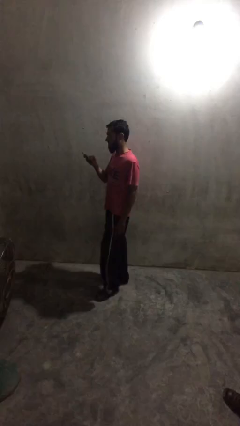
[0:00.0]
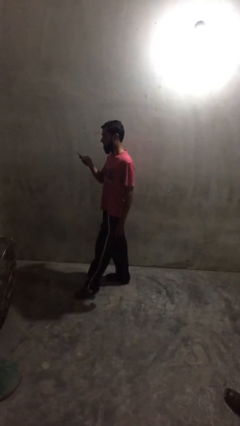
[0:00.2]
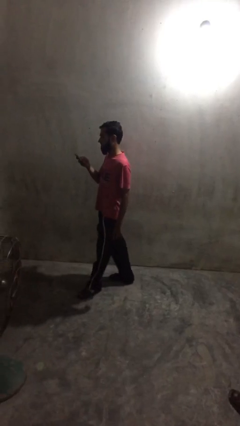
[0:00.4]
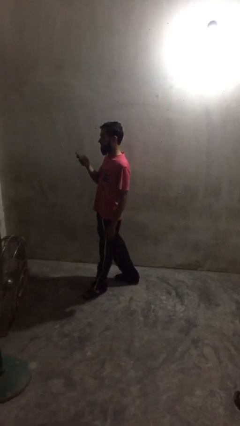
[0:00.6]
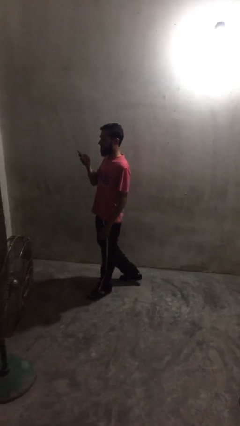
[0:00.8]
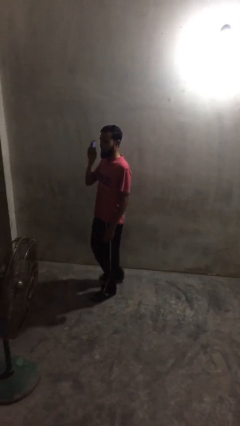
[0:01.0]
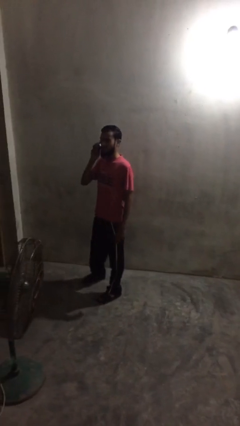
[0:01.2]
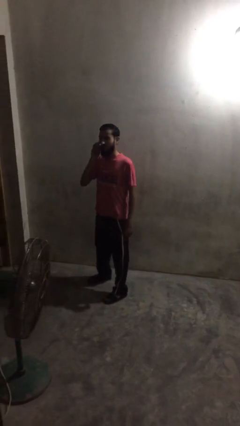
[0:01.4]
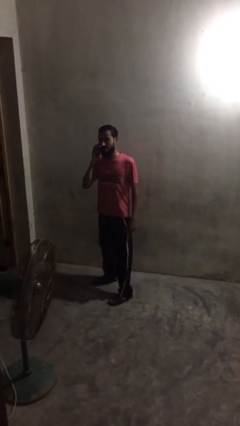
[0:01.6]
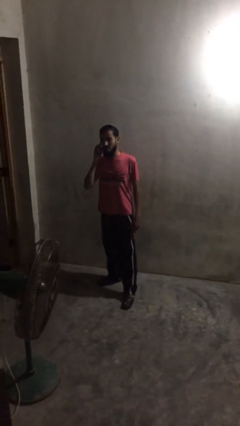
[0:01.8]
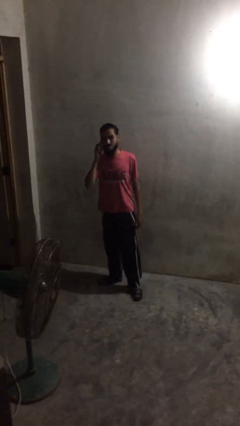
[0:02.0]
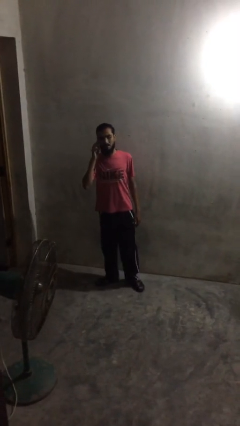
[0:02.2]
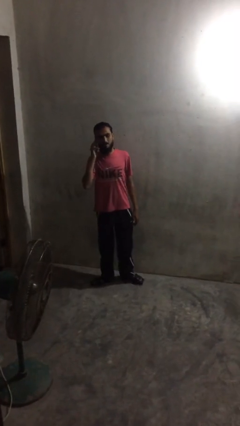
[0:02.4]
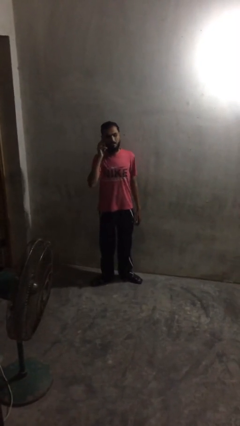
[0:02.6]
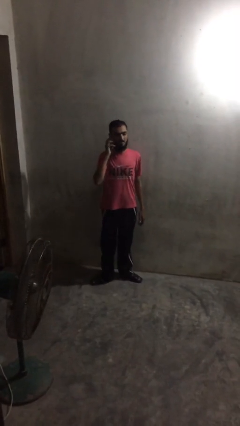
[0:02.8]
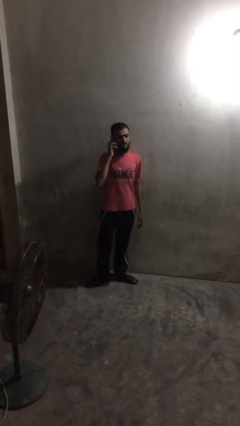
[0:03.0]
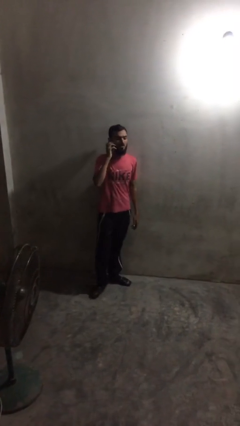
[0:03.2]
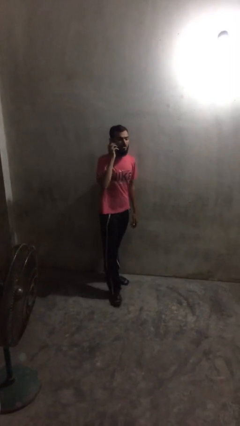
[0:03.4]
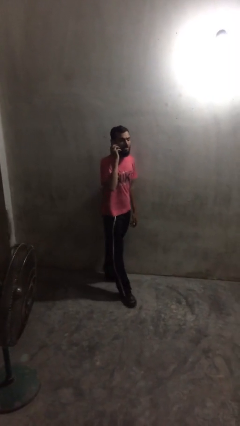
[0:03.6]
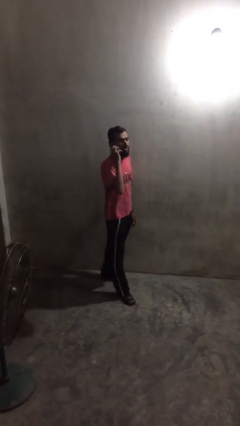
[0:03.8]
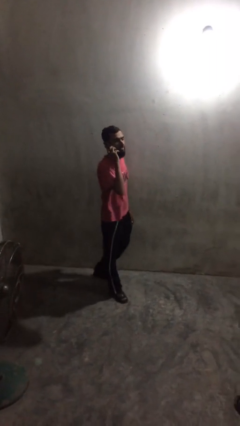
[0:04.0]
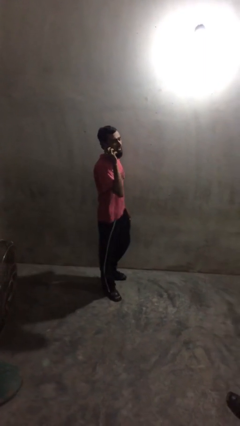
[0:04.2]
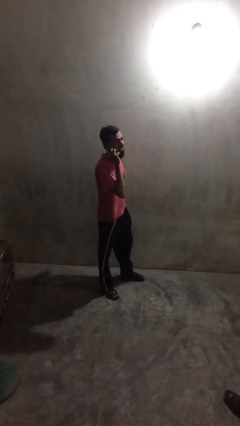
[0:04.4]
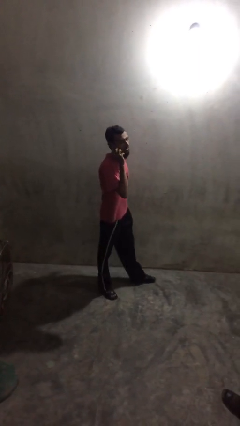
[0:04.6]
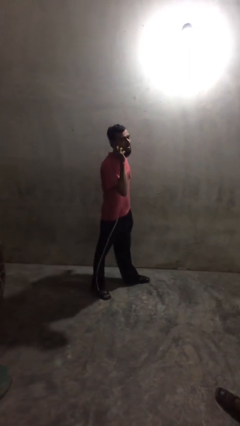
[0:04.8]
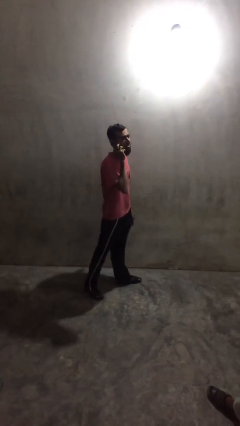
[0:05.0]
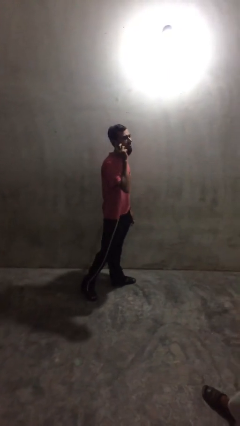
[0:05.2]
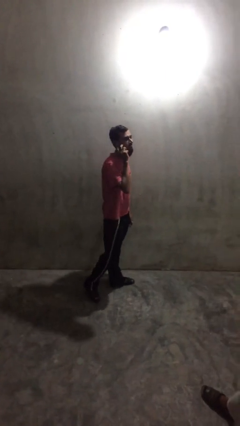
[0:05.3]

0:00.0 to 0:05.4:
person talks on phone

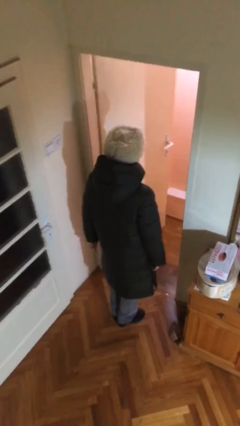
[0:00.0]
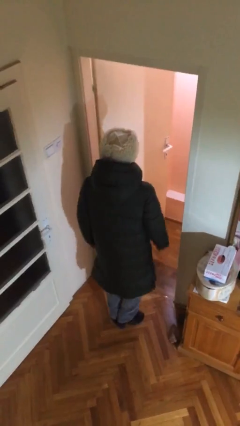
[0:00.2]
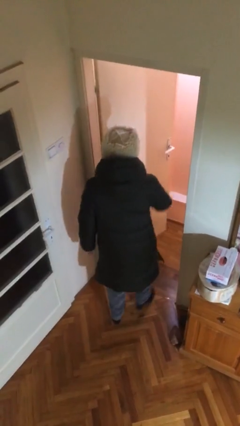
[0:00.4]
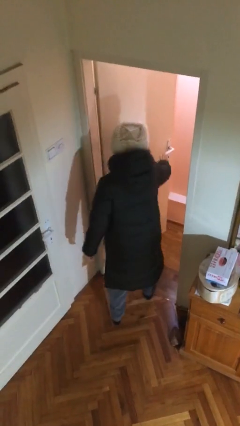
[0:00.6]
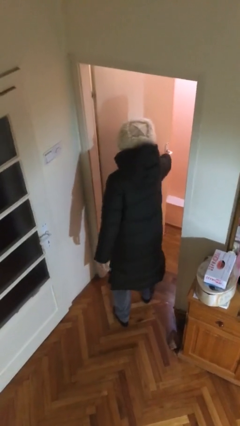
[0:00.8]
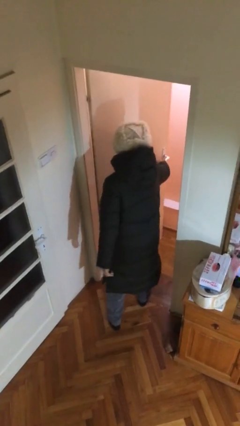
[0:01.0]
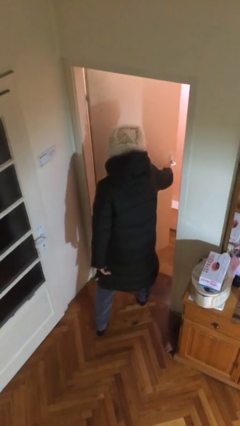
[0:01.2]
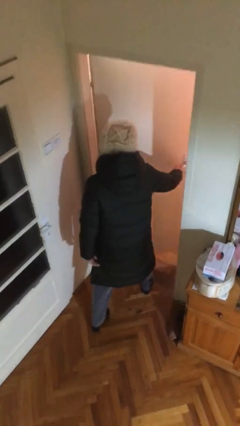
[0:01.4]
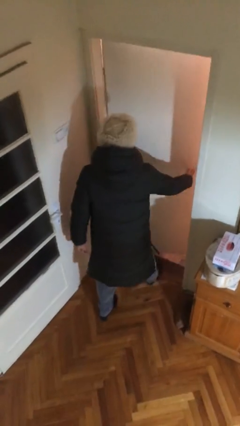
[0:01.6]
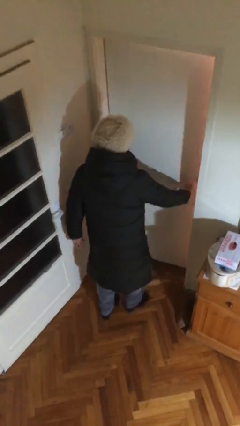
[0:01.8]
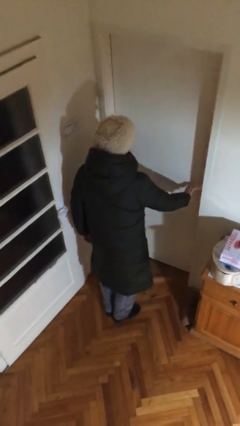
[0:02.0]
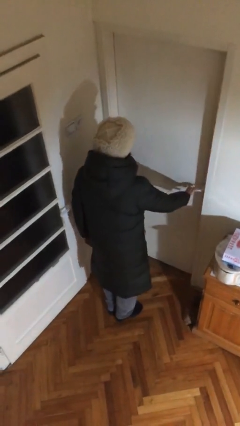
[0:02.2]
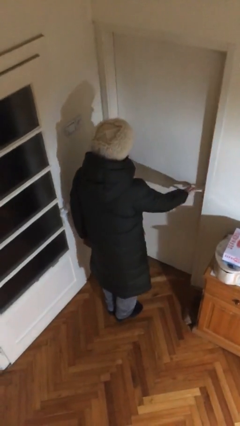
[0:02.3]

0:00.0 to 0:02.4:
person closes facility door

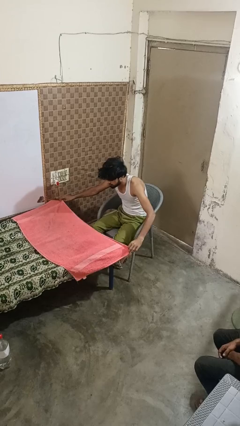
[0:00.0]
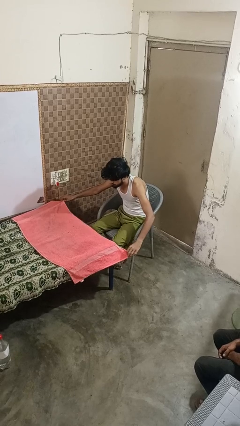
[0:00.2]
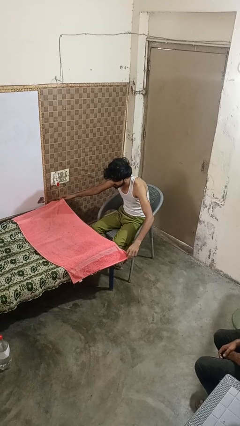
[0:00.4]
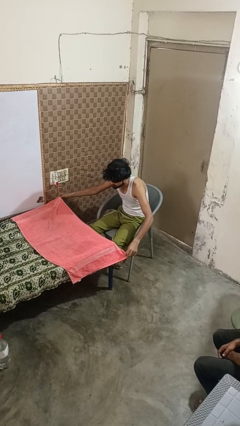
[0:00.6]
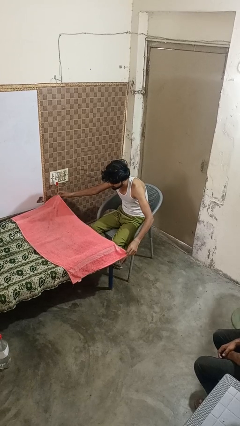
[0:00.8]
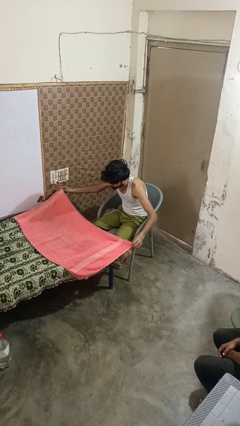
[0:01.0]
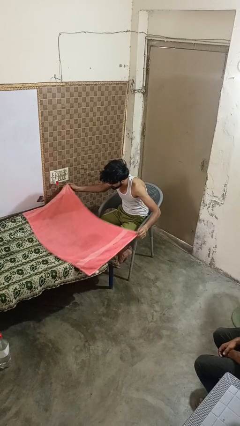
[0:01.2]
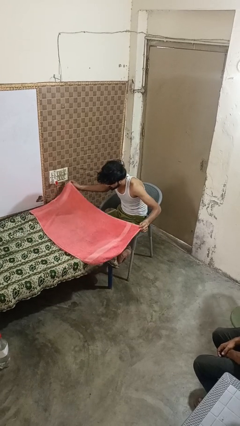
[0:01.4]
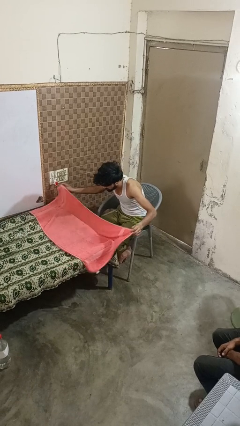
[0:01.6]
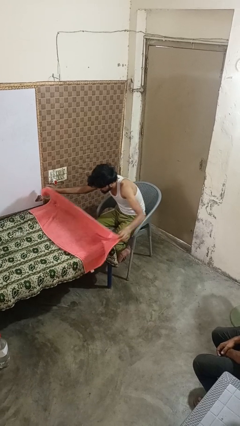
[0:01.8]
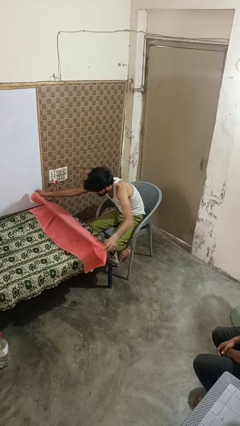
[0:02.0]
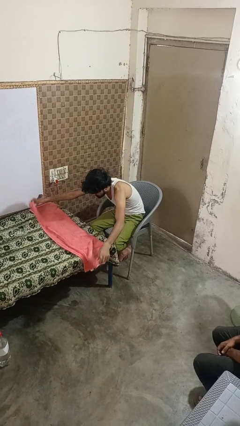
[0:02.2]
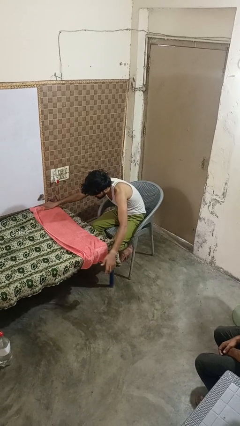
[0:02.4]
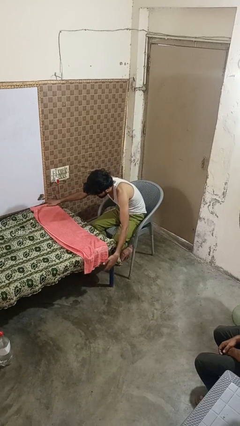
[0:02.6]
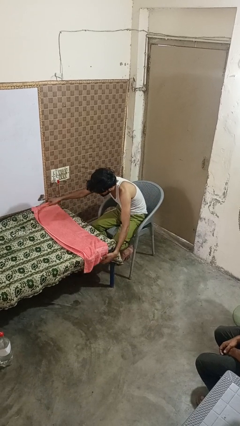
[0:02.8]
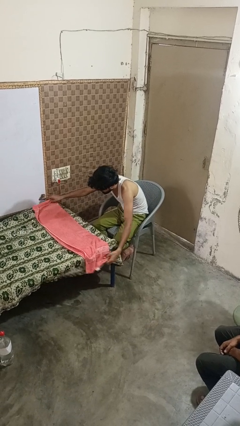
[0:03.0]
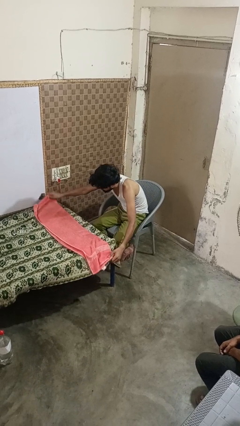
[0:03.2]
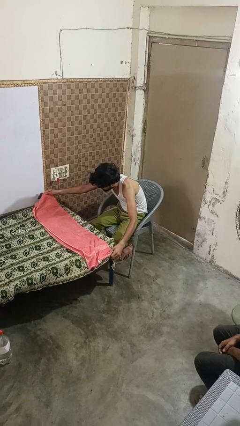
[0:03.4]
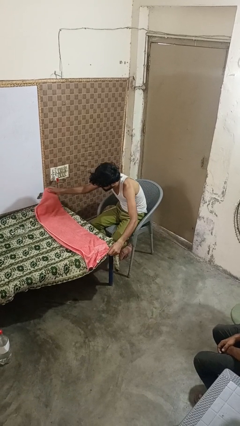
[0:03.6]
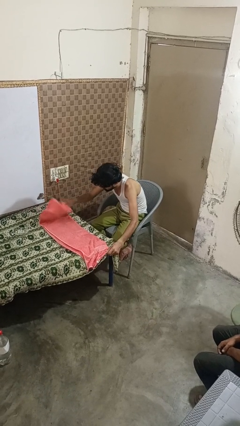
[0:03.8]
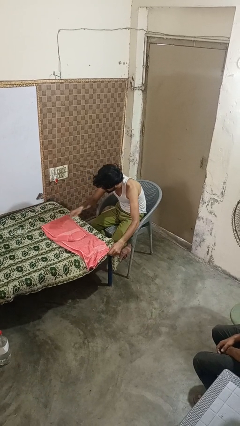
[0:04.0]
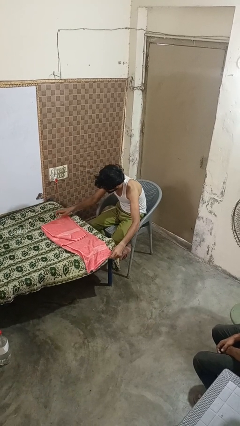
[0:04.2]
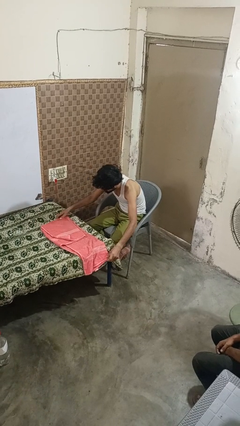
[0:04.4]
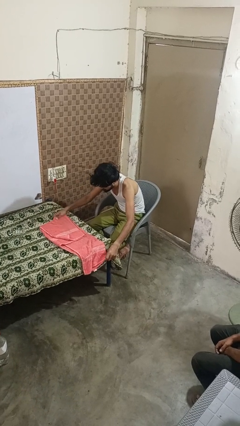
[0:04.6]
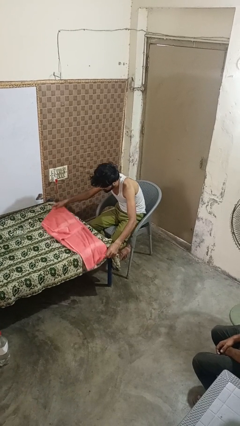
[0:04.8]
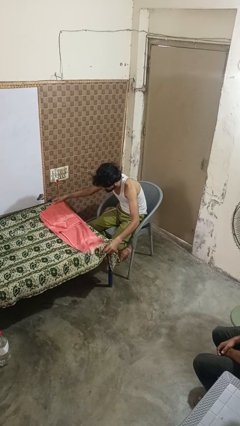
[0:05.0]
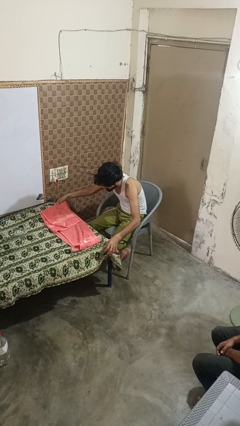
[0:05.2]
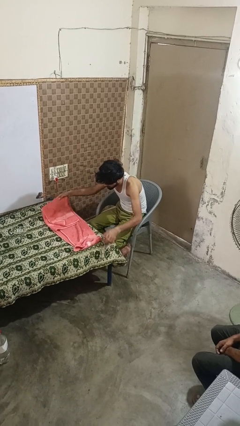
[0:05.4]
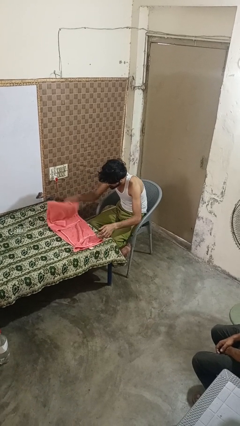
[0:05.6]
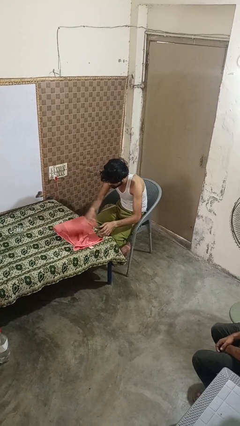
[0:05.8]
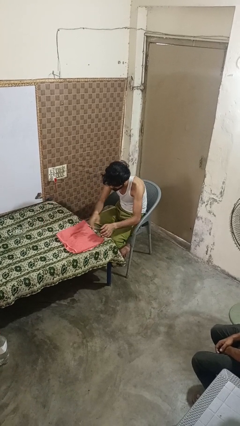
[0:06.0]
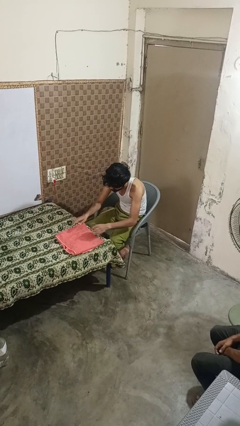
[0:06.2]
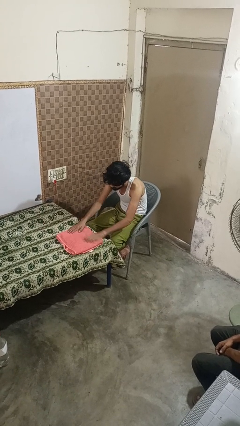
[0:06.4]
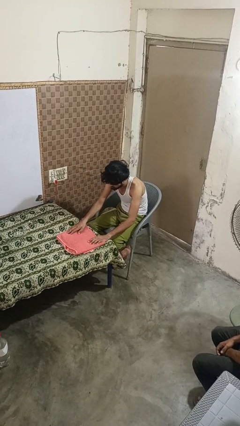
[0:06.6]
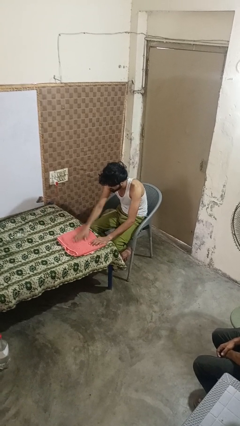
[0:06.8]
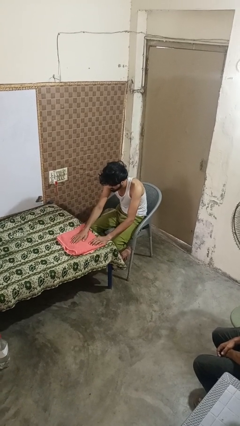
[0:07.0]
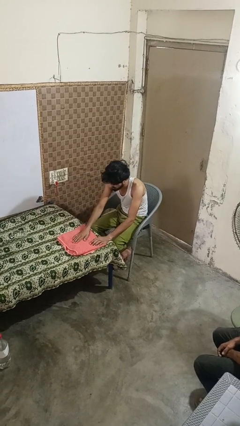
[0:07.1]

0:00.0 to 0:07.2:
person folds towel

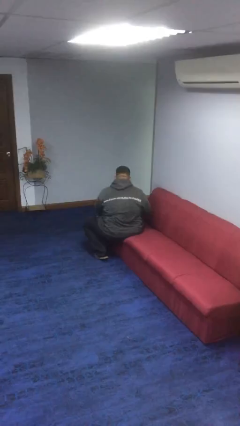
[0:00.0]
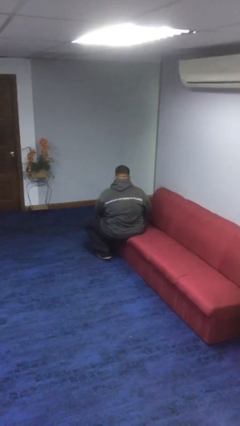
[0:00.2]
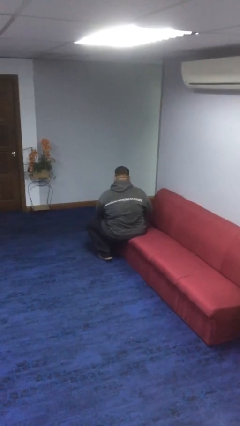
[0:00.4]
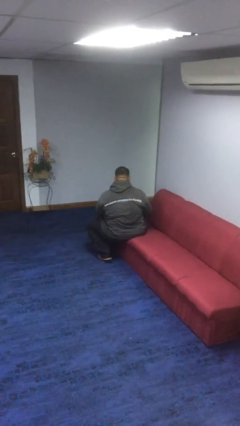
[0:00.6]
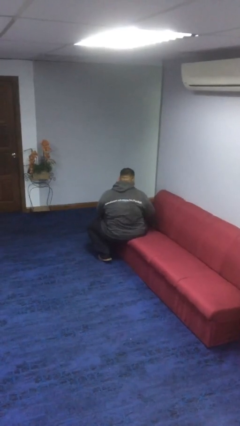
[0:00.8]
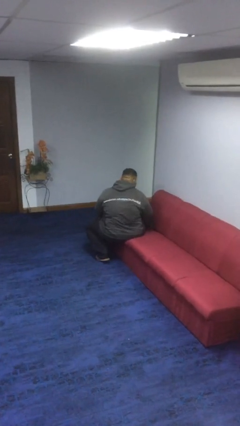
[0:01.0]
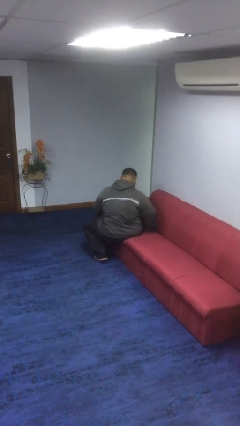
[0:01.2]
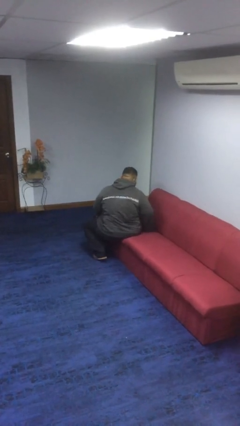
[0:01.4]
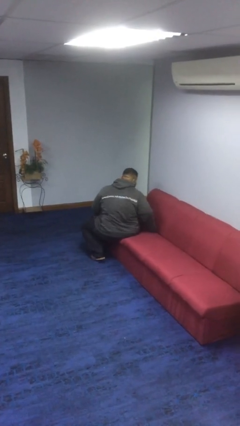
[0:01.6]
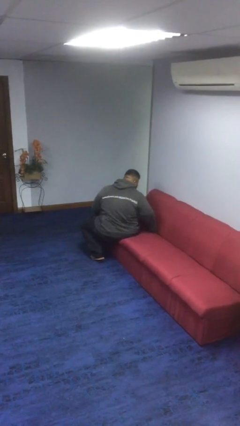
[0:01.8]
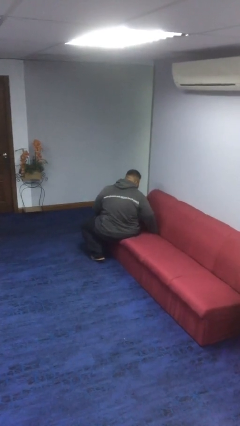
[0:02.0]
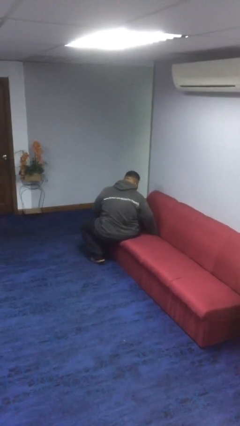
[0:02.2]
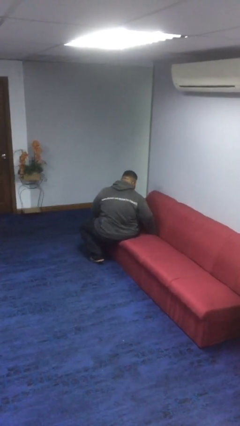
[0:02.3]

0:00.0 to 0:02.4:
person searches in couch

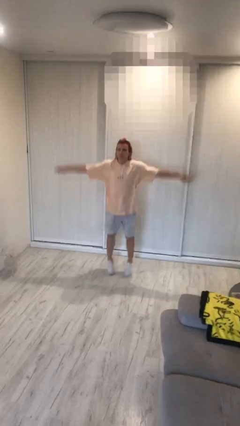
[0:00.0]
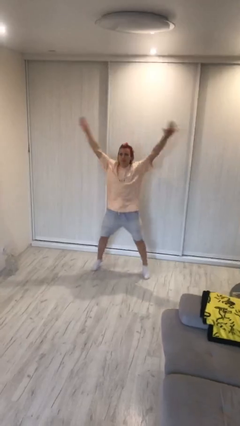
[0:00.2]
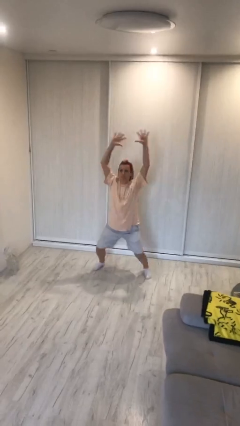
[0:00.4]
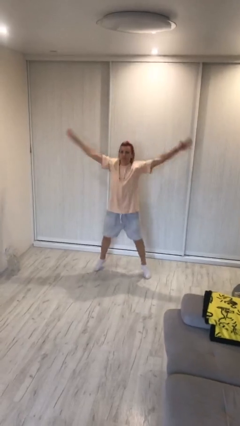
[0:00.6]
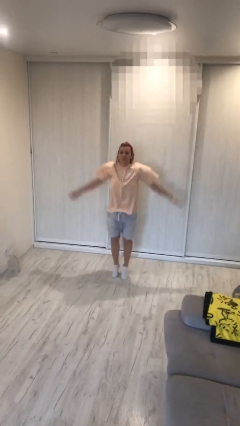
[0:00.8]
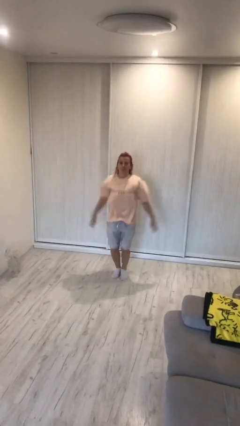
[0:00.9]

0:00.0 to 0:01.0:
person exercises with jumping jacks
